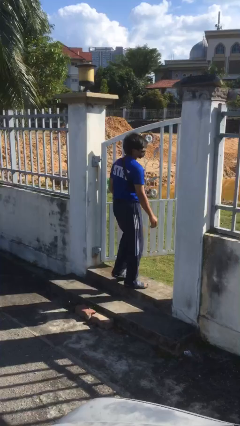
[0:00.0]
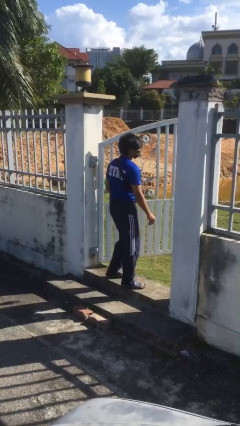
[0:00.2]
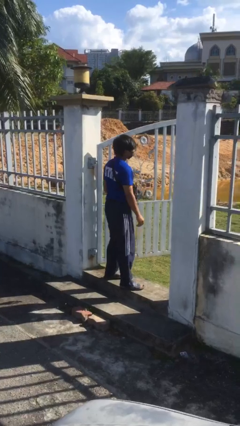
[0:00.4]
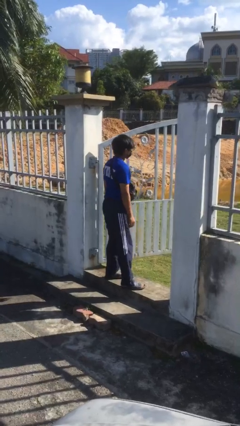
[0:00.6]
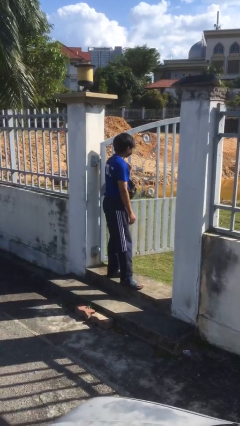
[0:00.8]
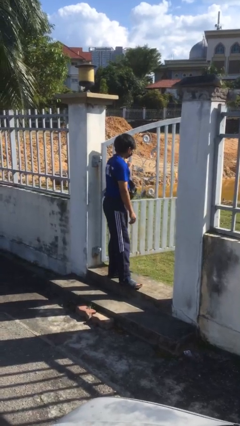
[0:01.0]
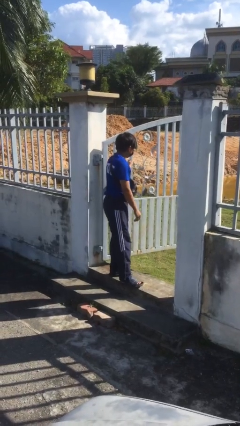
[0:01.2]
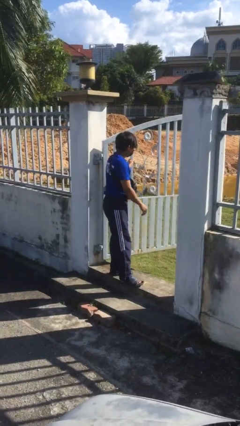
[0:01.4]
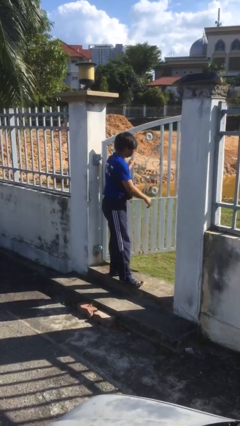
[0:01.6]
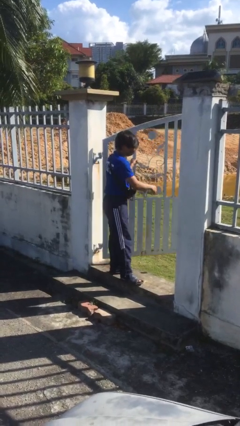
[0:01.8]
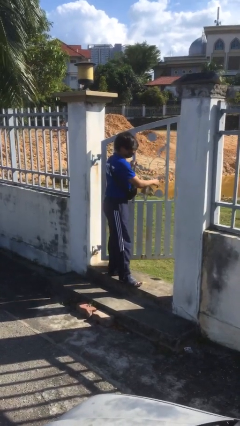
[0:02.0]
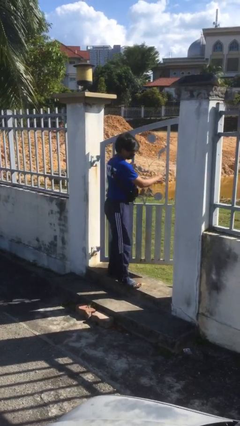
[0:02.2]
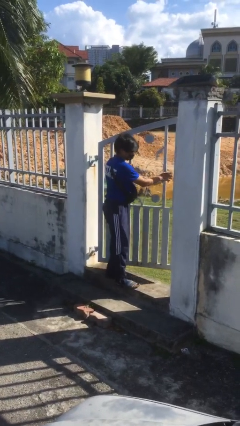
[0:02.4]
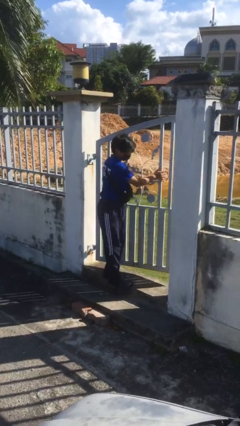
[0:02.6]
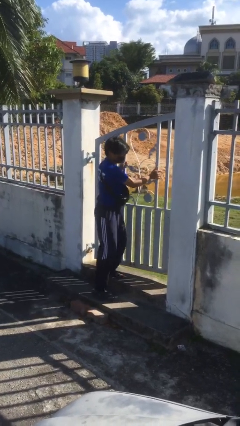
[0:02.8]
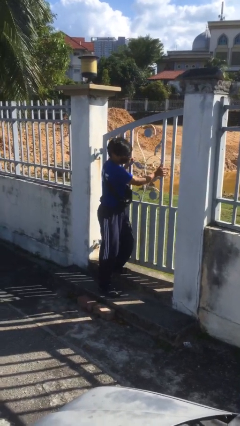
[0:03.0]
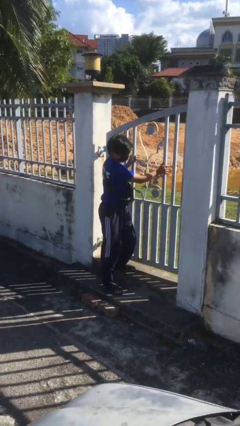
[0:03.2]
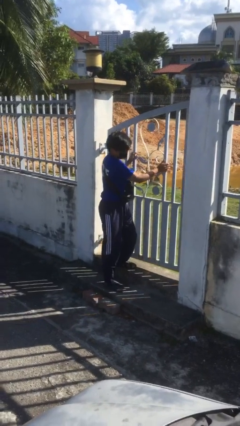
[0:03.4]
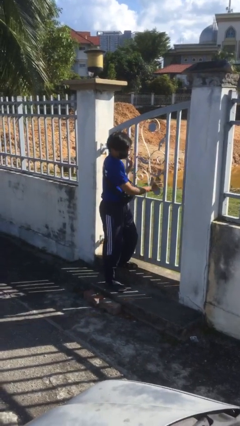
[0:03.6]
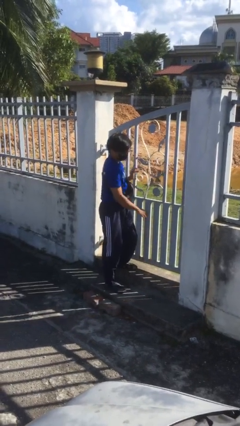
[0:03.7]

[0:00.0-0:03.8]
person closes facility door

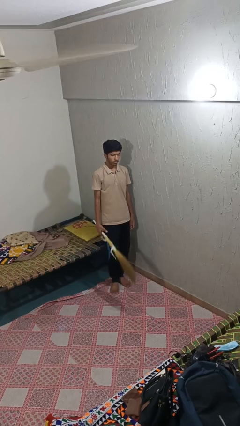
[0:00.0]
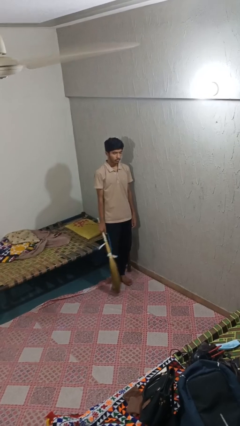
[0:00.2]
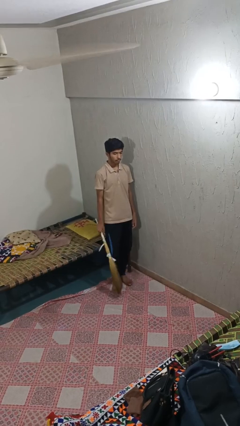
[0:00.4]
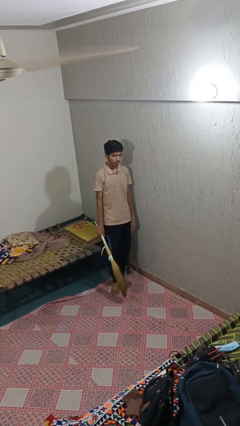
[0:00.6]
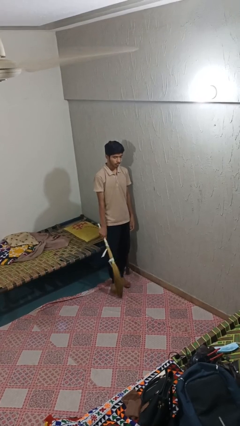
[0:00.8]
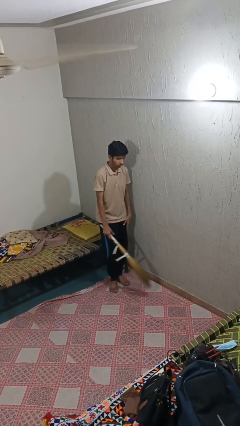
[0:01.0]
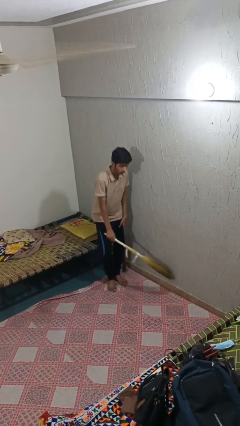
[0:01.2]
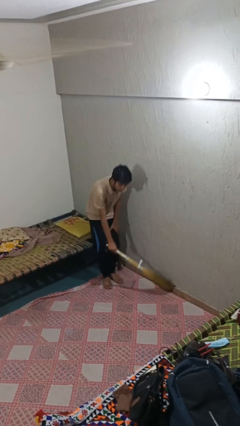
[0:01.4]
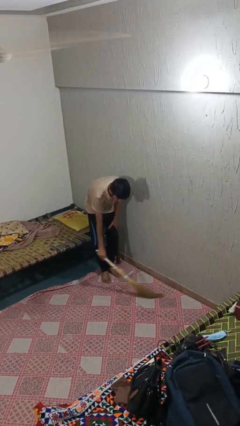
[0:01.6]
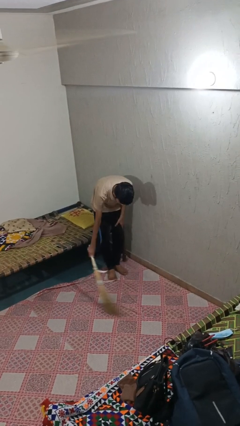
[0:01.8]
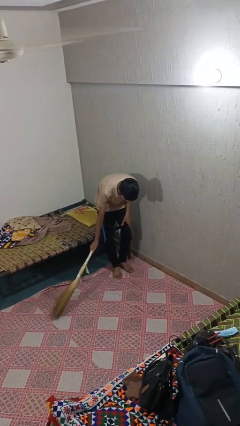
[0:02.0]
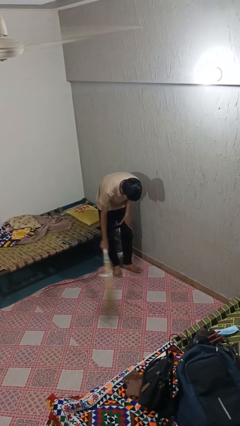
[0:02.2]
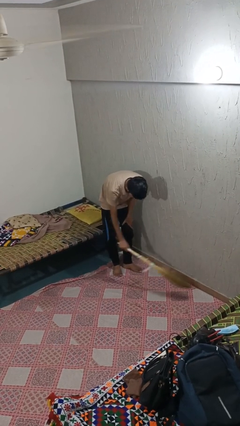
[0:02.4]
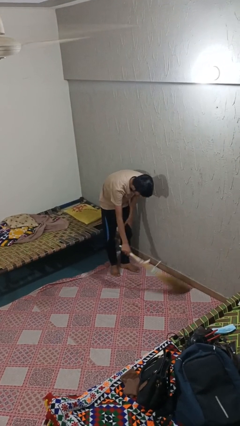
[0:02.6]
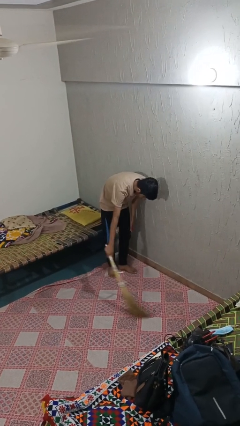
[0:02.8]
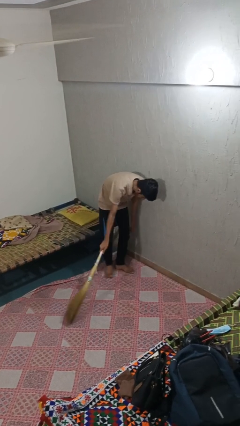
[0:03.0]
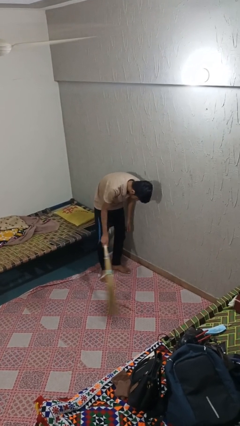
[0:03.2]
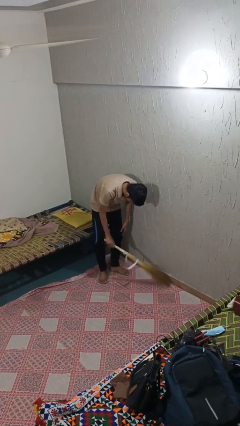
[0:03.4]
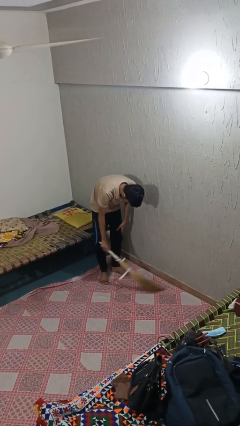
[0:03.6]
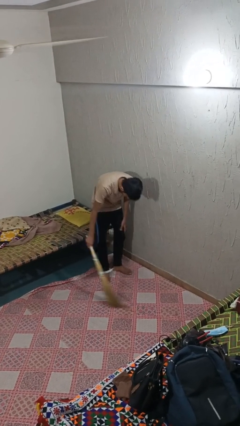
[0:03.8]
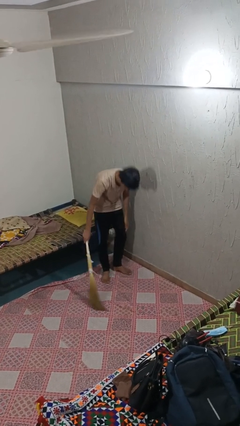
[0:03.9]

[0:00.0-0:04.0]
person sweeps floor

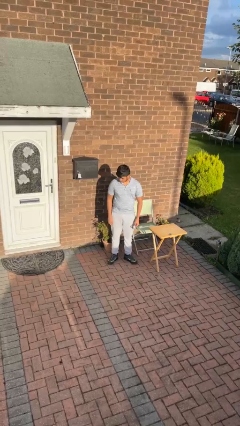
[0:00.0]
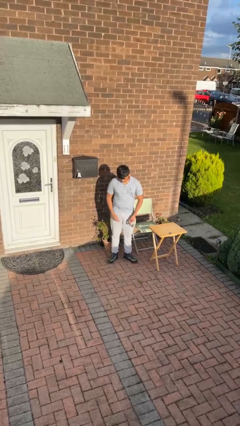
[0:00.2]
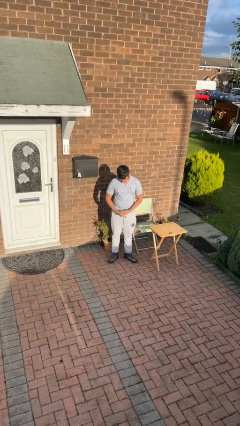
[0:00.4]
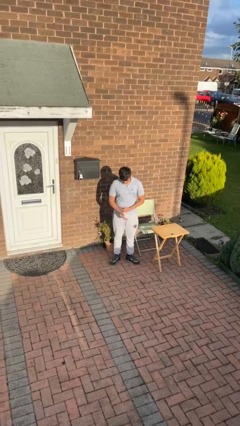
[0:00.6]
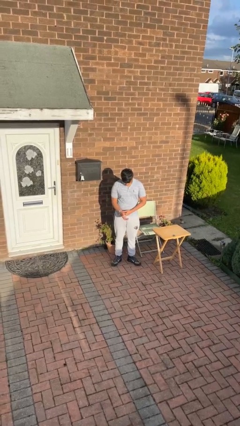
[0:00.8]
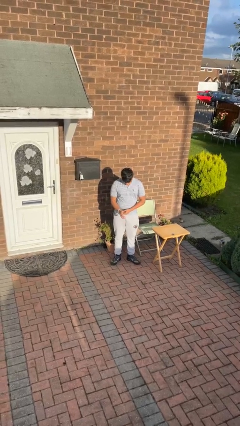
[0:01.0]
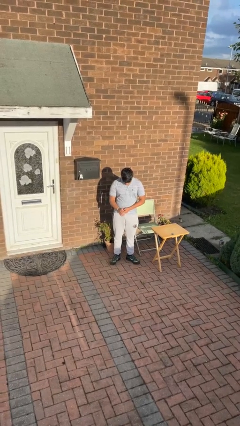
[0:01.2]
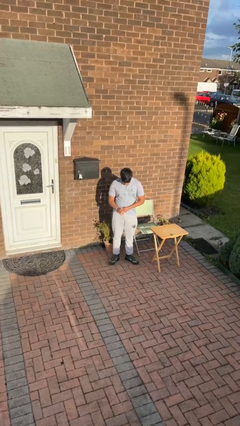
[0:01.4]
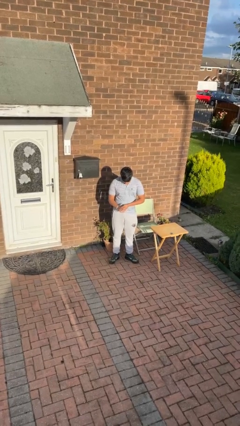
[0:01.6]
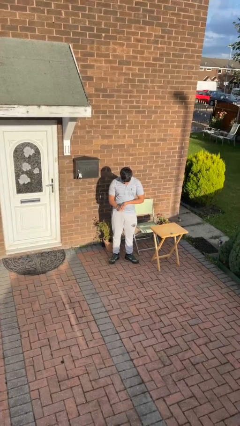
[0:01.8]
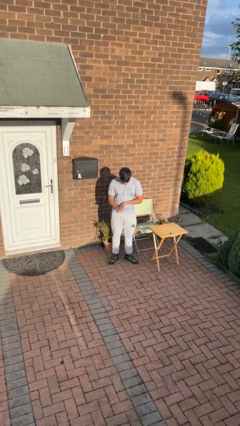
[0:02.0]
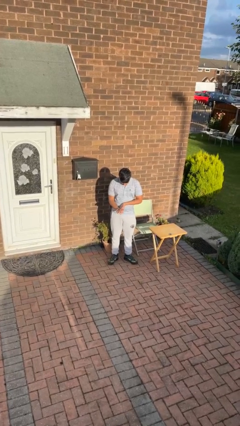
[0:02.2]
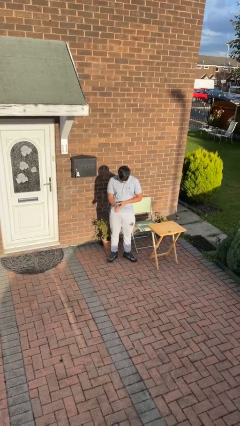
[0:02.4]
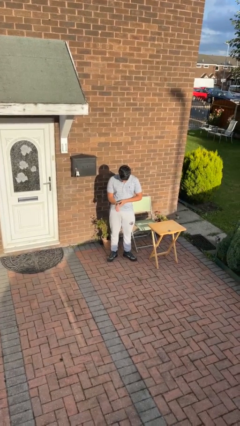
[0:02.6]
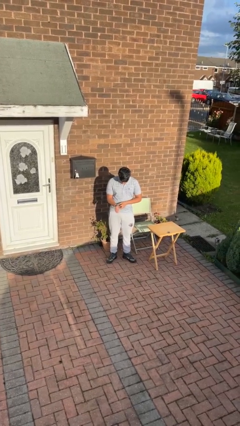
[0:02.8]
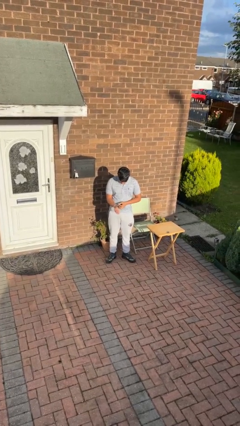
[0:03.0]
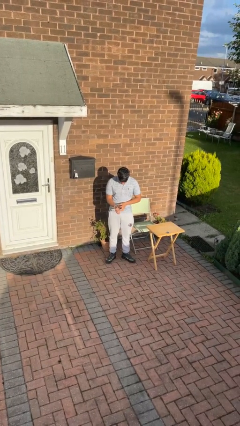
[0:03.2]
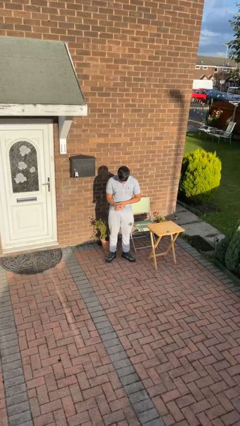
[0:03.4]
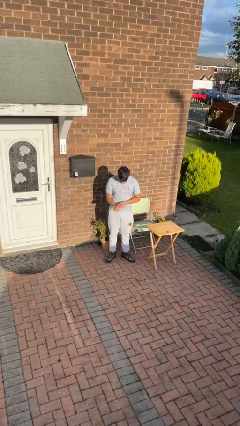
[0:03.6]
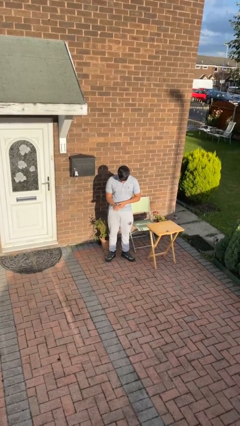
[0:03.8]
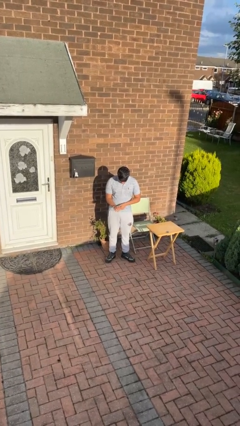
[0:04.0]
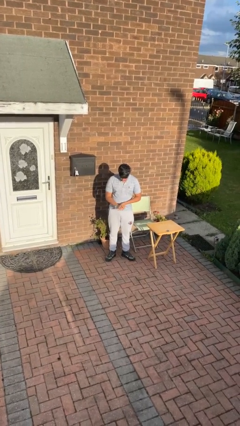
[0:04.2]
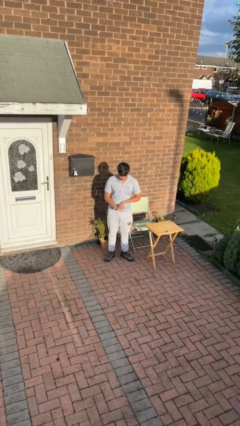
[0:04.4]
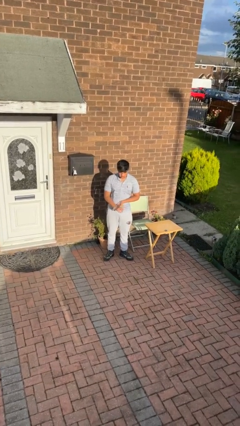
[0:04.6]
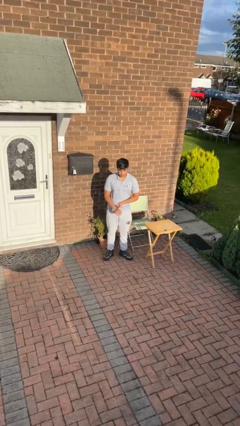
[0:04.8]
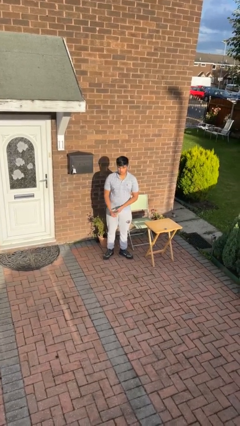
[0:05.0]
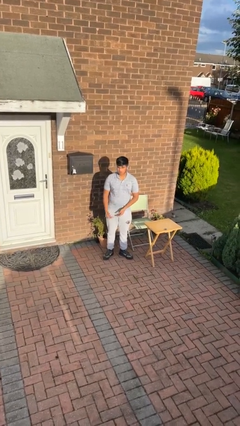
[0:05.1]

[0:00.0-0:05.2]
person puts on wristwatch

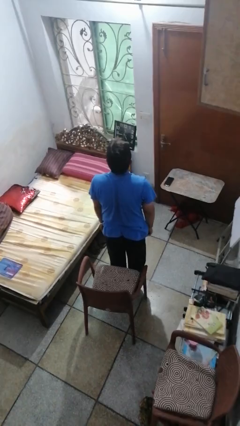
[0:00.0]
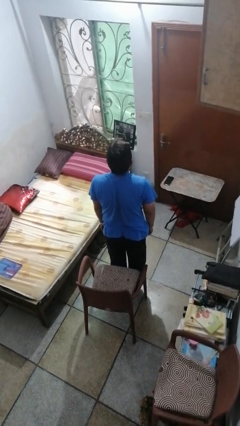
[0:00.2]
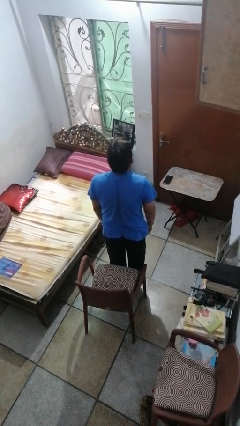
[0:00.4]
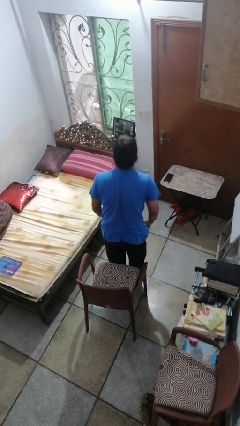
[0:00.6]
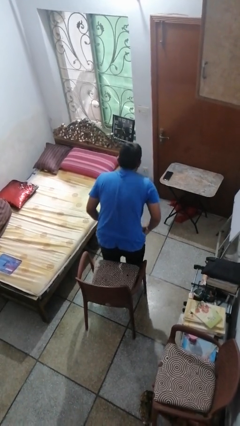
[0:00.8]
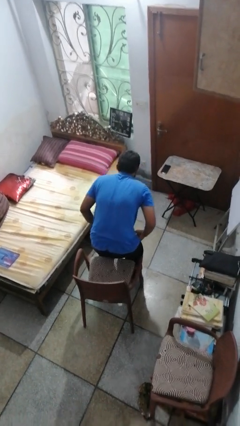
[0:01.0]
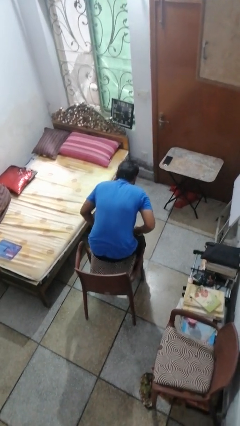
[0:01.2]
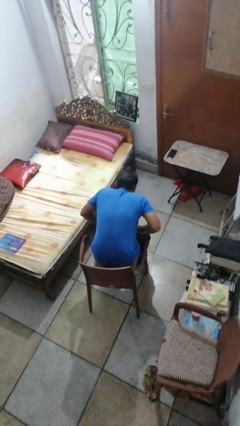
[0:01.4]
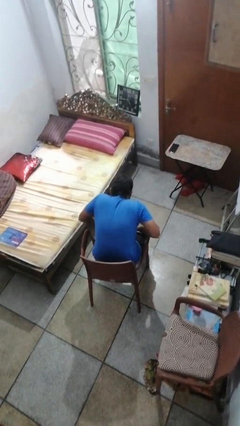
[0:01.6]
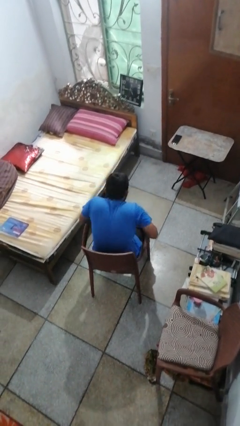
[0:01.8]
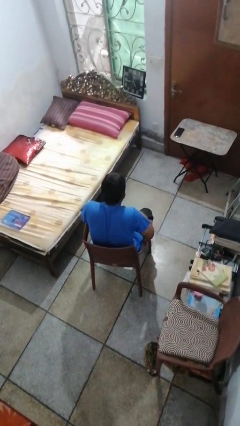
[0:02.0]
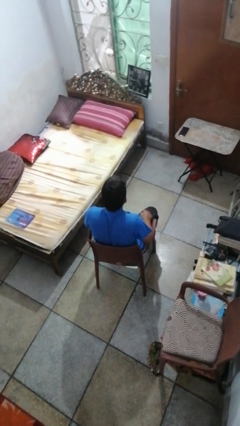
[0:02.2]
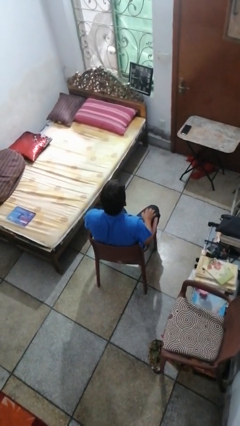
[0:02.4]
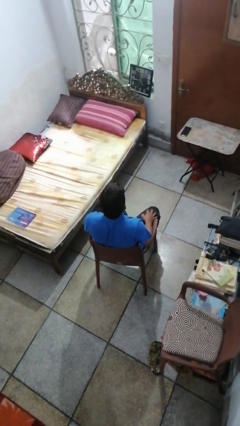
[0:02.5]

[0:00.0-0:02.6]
person sits down

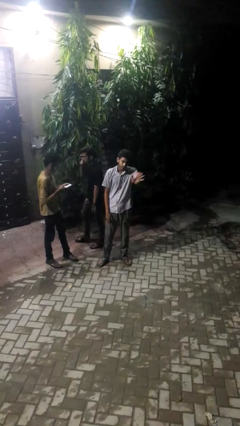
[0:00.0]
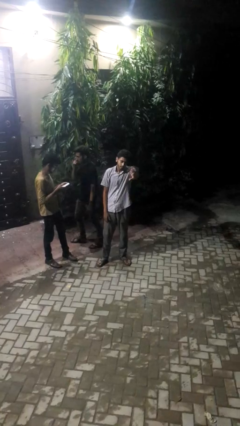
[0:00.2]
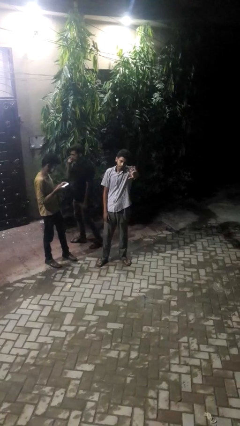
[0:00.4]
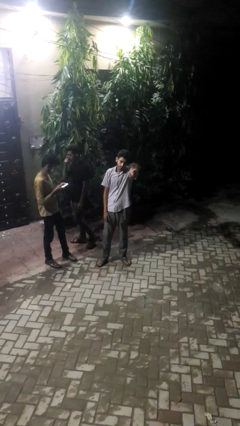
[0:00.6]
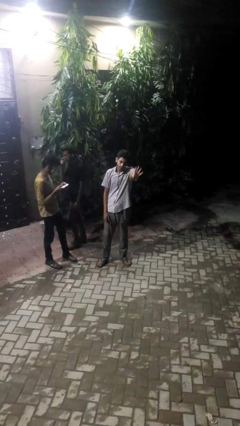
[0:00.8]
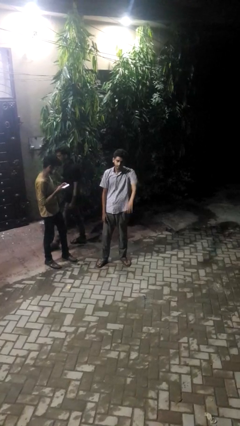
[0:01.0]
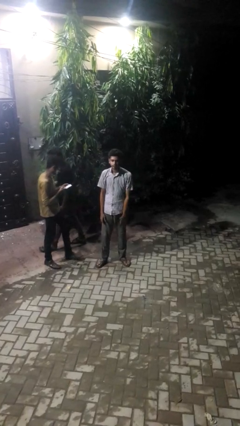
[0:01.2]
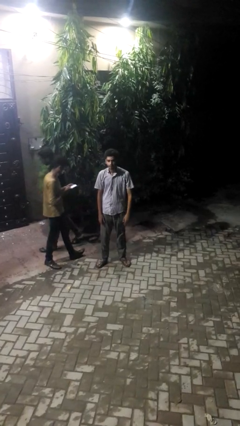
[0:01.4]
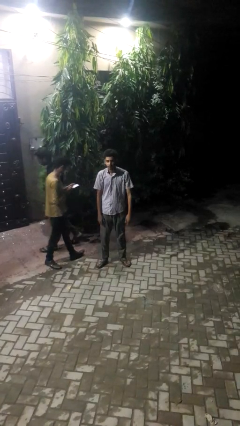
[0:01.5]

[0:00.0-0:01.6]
person waves at person
